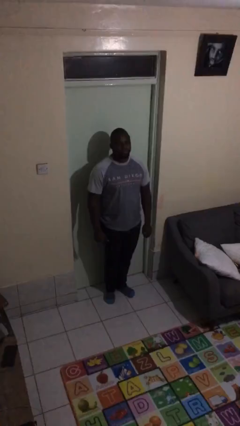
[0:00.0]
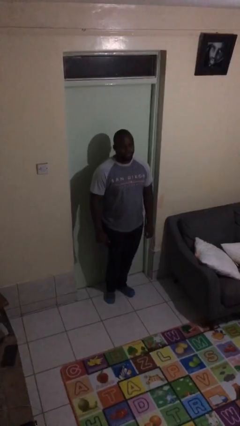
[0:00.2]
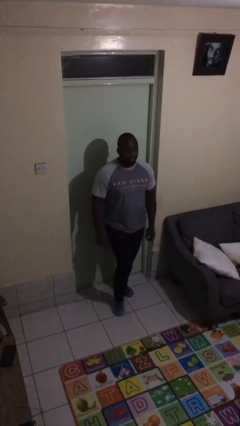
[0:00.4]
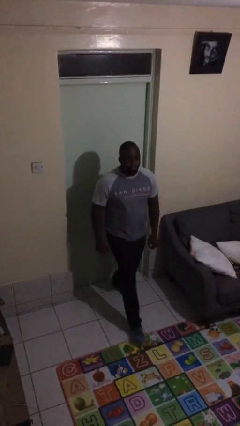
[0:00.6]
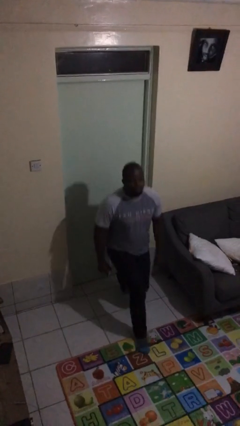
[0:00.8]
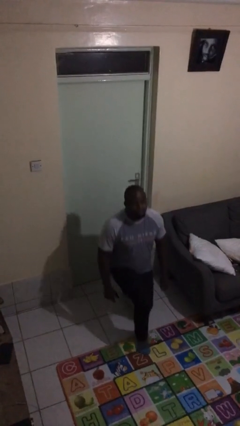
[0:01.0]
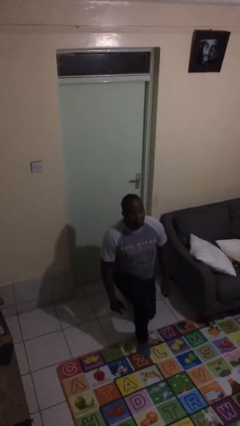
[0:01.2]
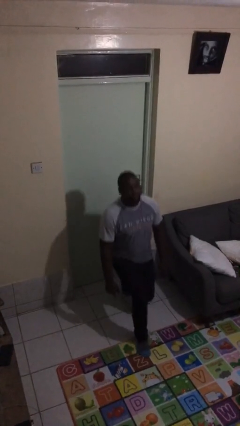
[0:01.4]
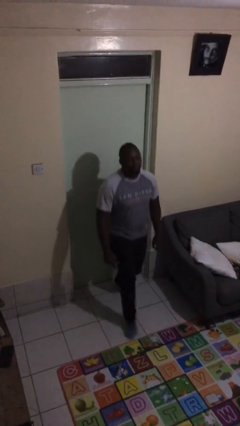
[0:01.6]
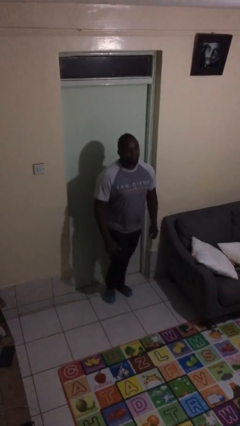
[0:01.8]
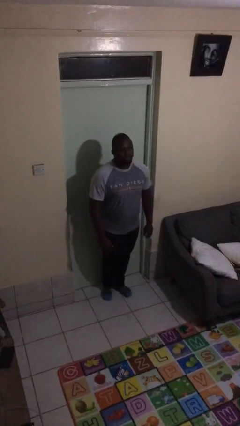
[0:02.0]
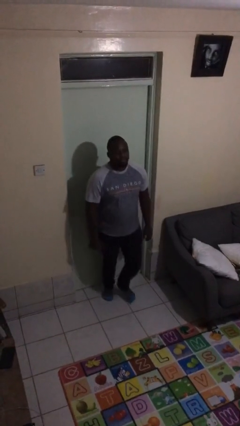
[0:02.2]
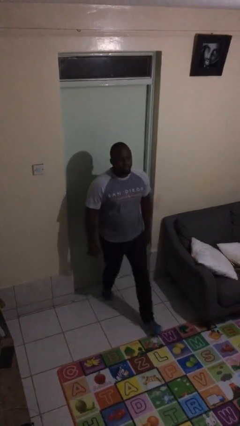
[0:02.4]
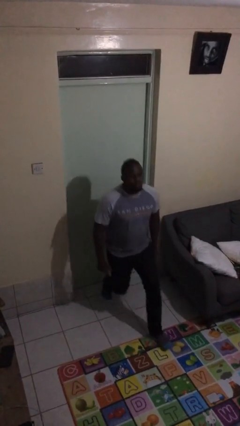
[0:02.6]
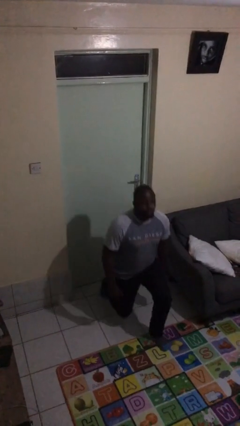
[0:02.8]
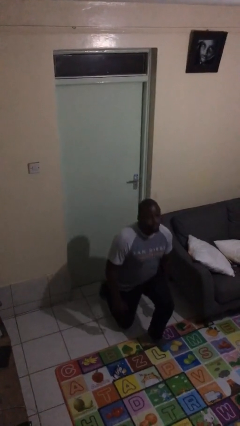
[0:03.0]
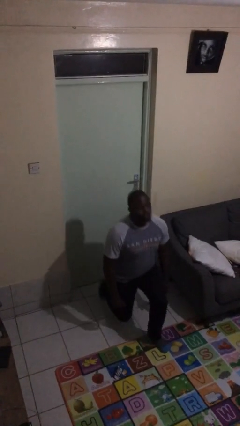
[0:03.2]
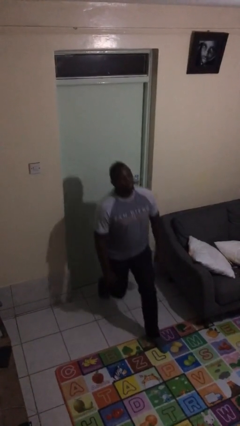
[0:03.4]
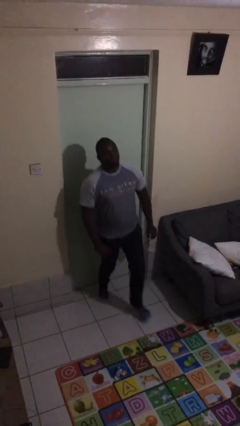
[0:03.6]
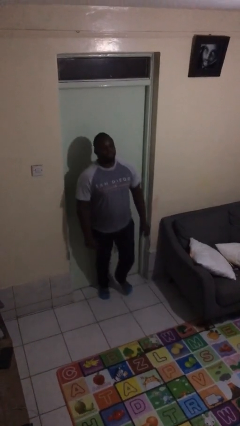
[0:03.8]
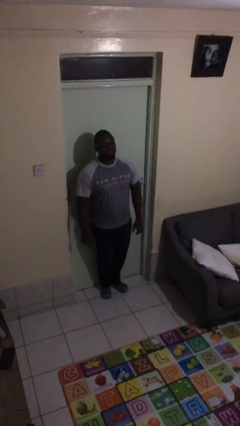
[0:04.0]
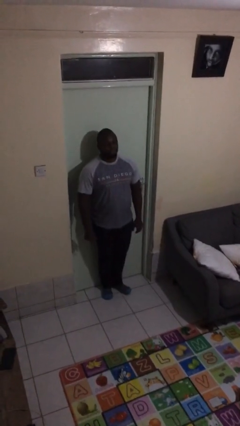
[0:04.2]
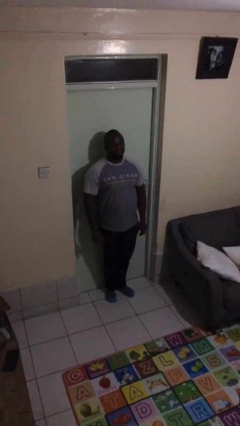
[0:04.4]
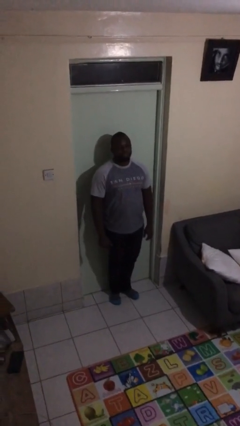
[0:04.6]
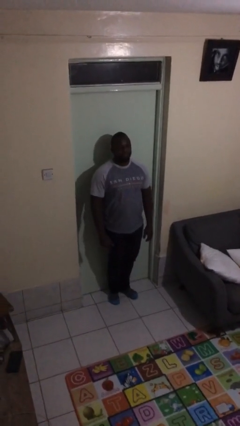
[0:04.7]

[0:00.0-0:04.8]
person exercises with lunges

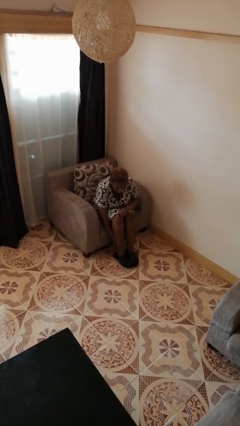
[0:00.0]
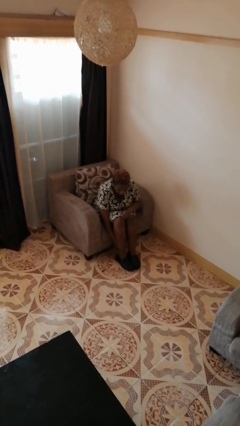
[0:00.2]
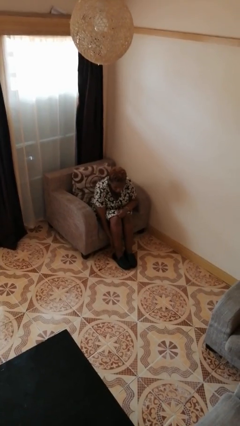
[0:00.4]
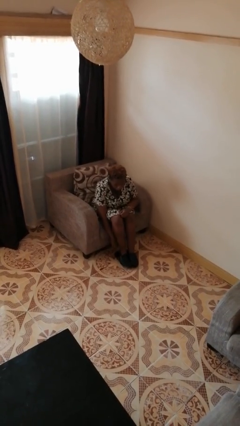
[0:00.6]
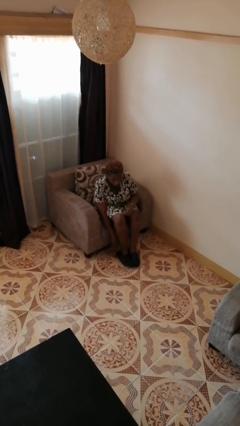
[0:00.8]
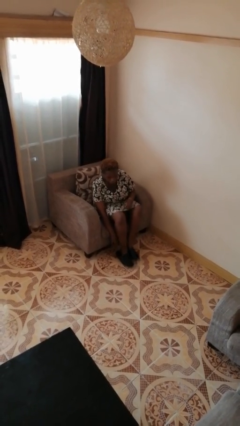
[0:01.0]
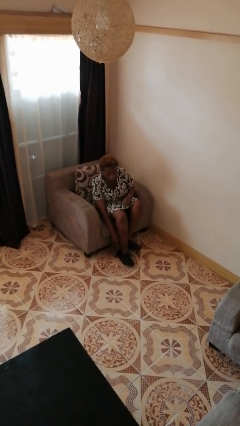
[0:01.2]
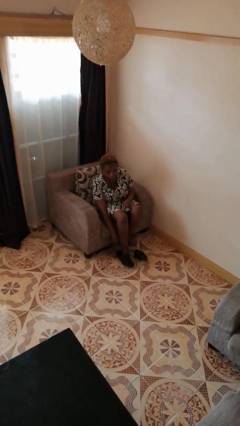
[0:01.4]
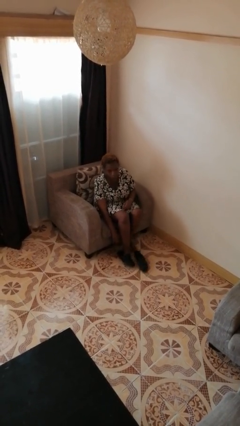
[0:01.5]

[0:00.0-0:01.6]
person takes off shoes

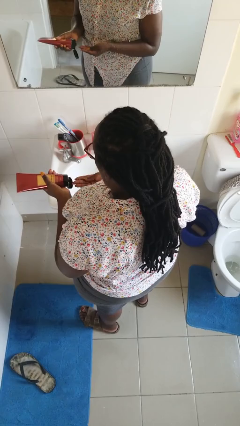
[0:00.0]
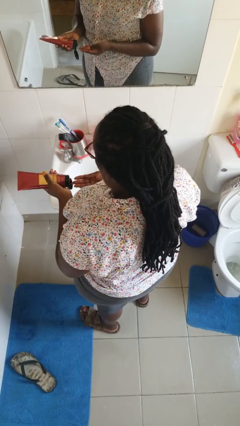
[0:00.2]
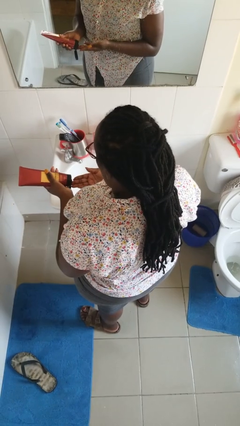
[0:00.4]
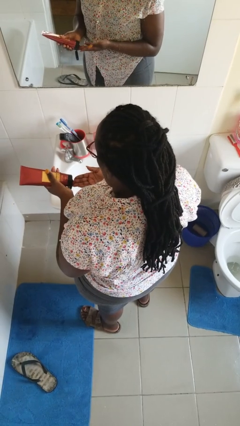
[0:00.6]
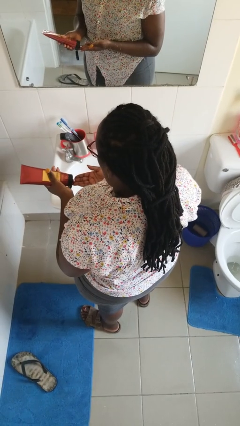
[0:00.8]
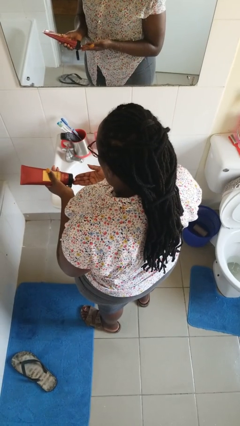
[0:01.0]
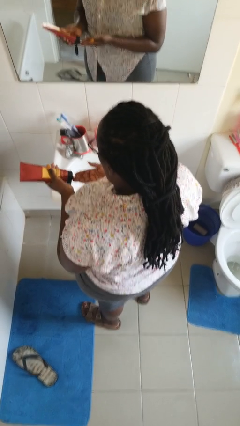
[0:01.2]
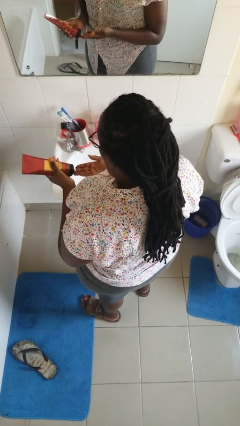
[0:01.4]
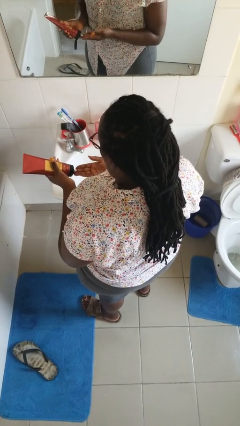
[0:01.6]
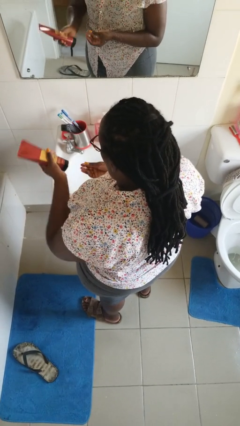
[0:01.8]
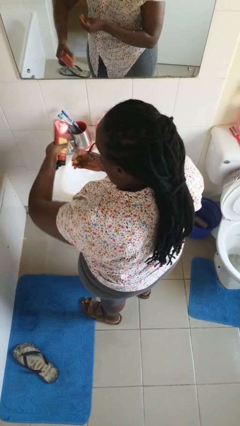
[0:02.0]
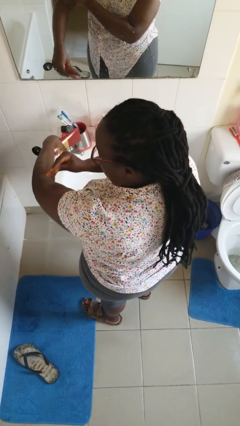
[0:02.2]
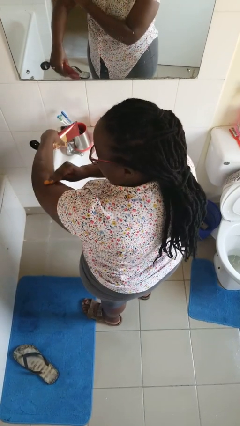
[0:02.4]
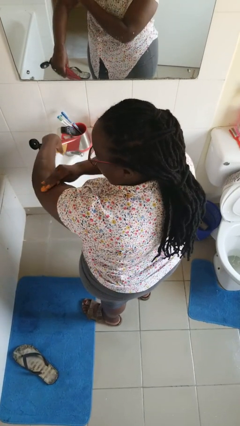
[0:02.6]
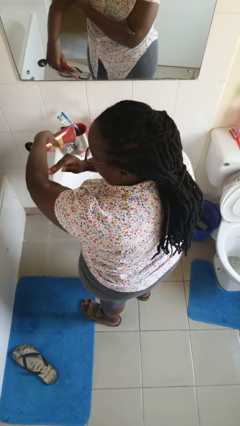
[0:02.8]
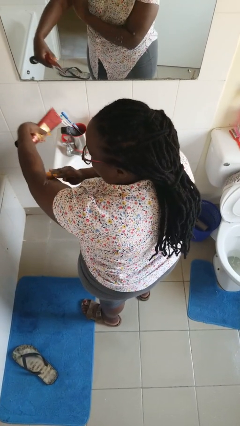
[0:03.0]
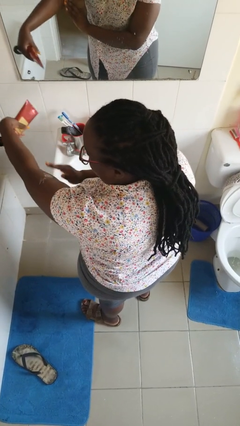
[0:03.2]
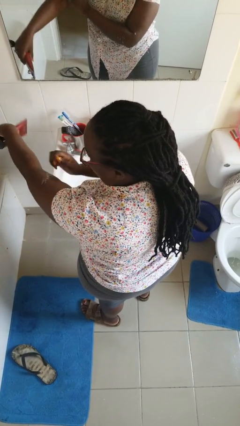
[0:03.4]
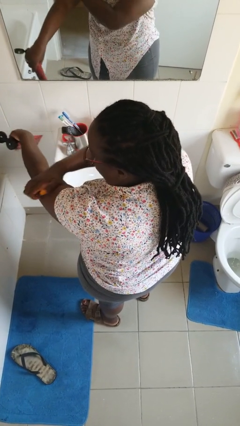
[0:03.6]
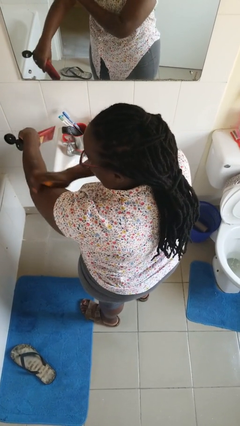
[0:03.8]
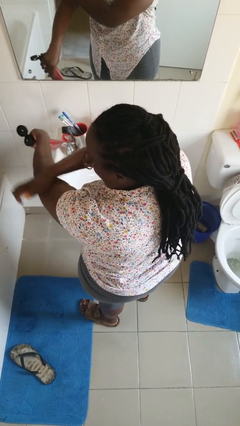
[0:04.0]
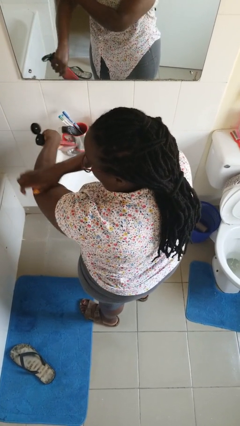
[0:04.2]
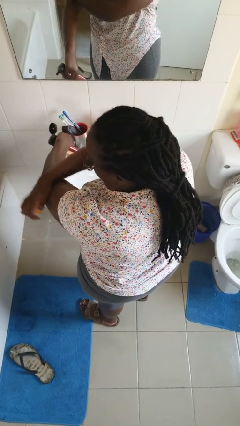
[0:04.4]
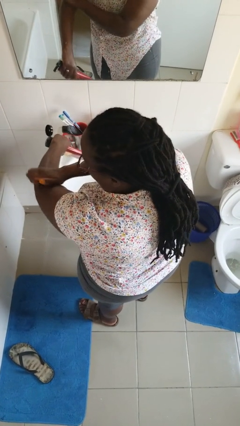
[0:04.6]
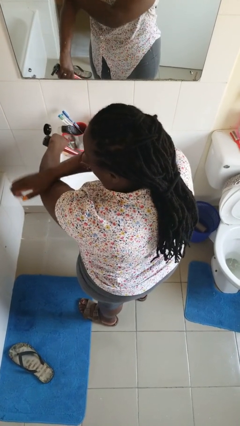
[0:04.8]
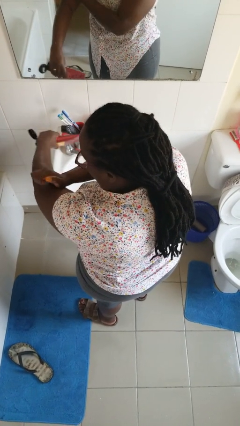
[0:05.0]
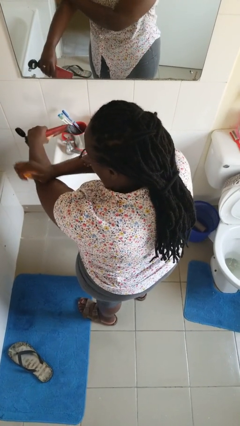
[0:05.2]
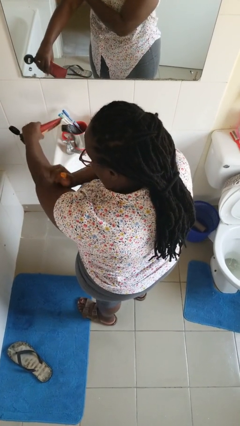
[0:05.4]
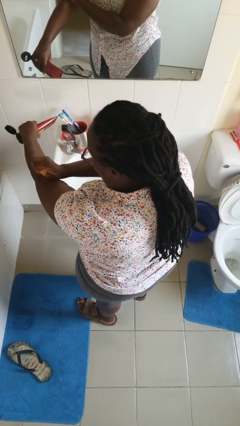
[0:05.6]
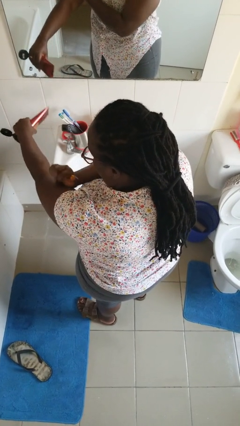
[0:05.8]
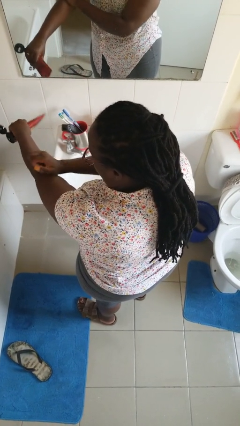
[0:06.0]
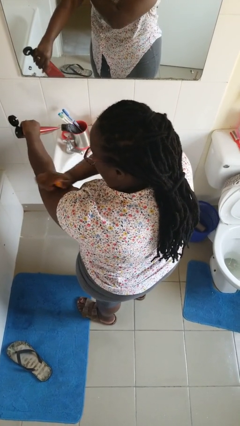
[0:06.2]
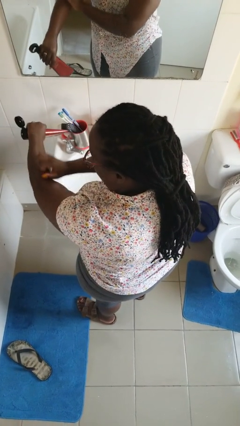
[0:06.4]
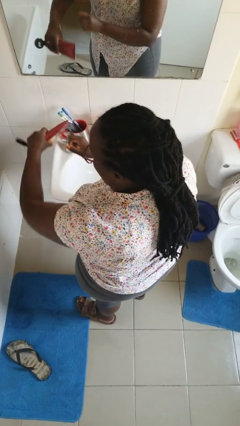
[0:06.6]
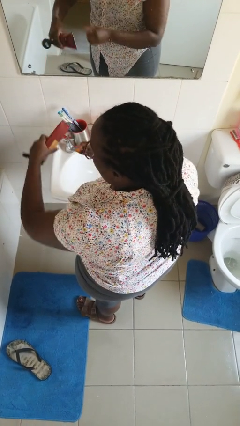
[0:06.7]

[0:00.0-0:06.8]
person applies sunscreen

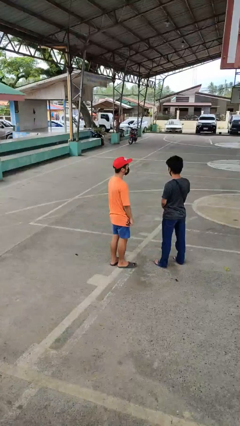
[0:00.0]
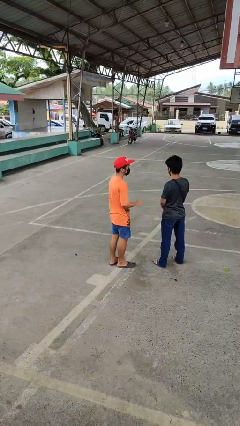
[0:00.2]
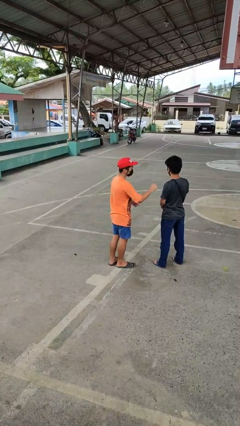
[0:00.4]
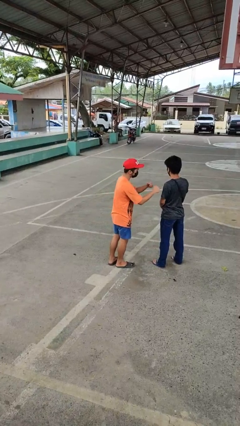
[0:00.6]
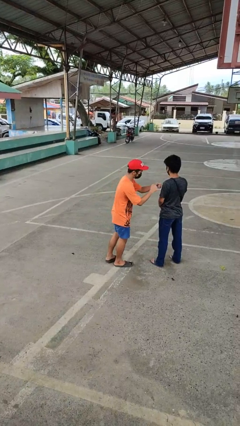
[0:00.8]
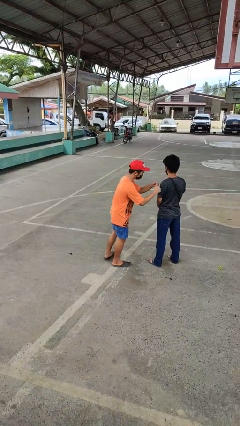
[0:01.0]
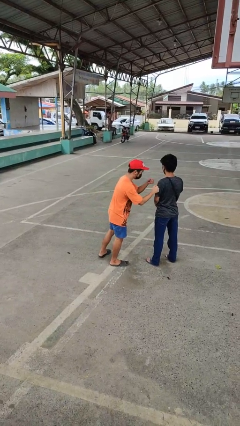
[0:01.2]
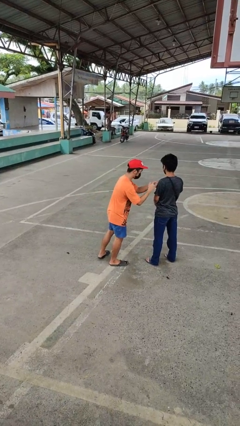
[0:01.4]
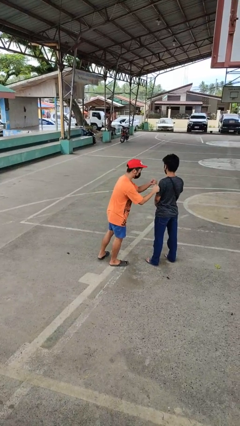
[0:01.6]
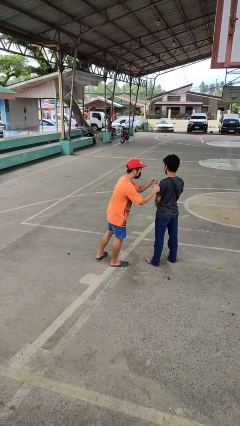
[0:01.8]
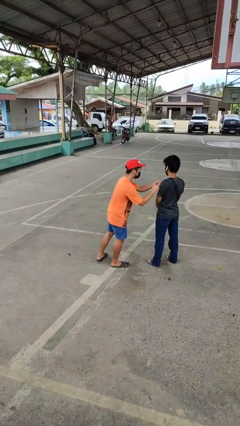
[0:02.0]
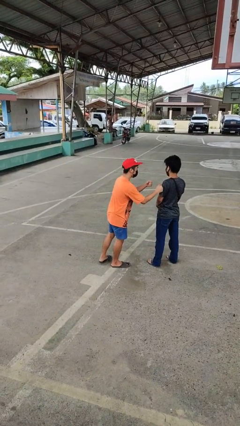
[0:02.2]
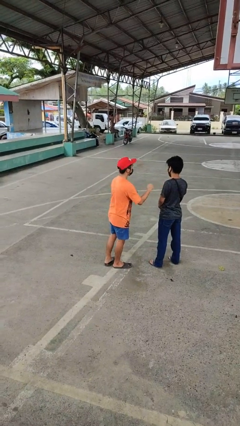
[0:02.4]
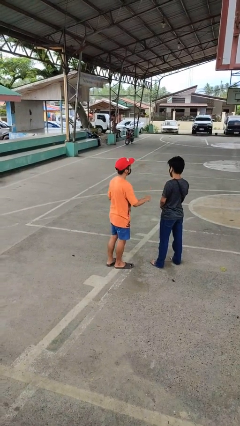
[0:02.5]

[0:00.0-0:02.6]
person pounds shoulders of person

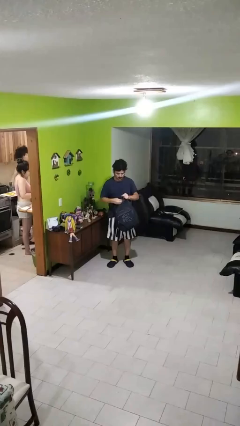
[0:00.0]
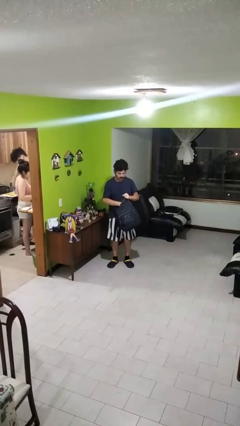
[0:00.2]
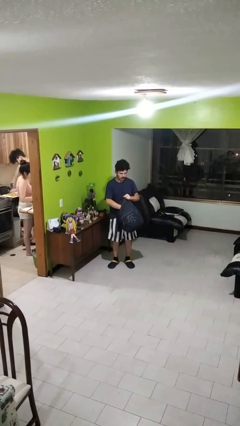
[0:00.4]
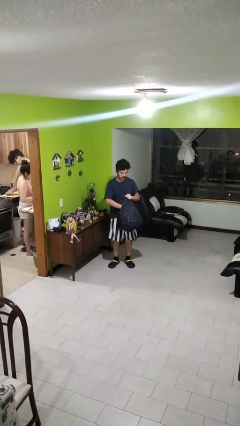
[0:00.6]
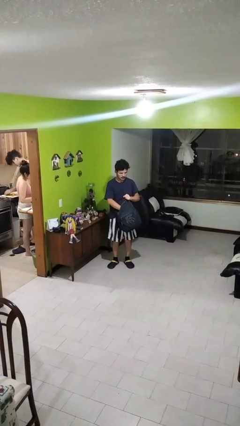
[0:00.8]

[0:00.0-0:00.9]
person searches in purse

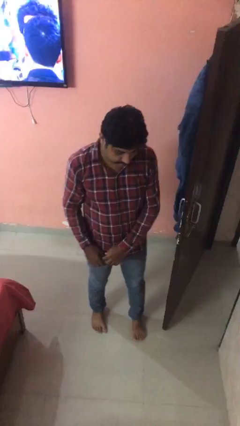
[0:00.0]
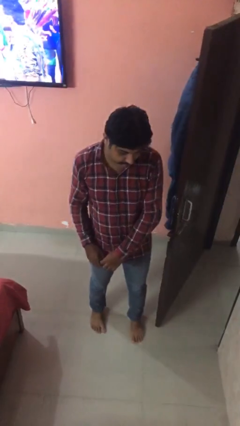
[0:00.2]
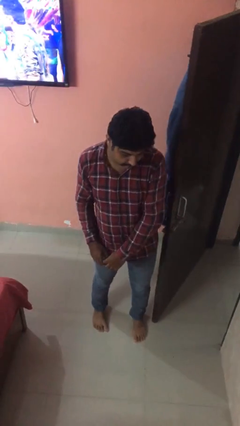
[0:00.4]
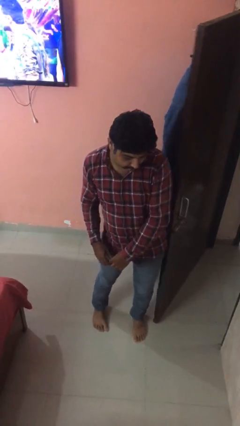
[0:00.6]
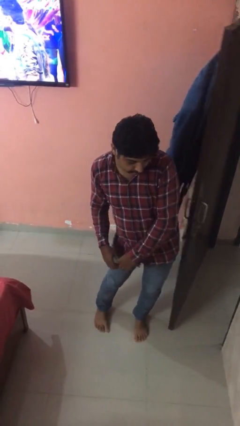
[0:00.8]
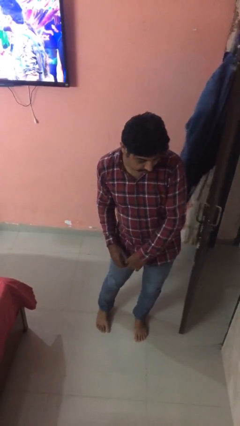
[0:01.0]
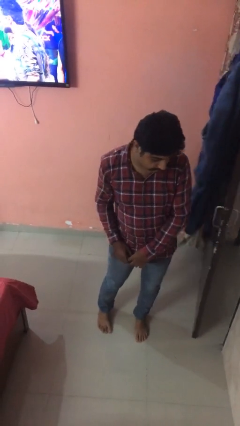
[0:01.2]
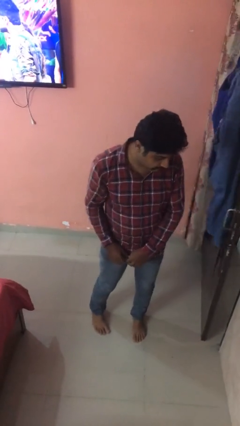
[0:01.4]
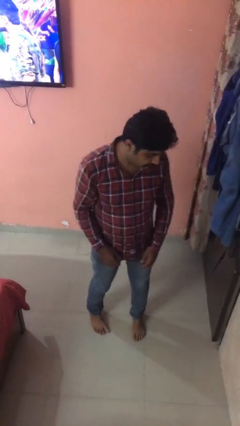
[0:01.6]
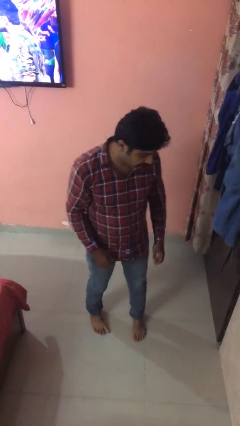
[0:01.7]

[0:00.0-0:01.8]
person closes door with hip
